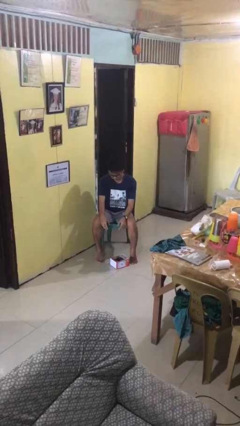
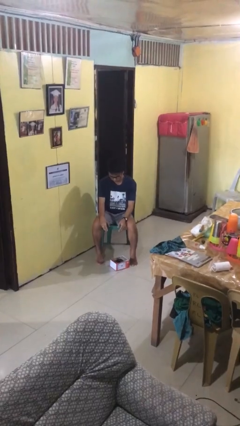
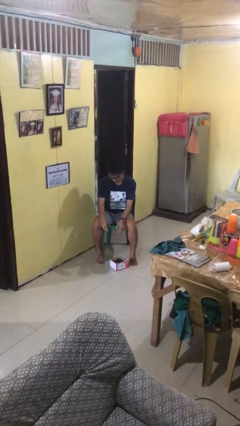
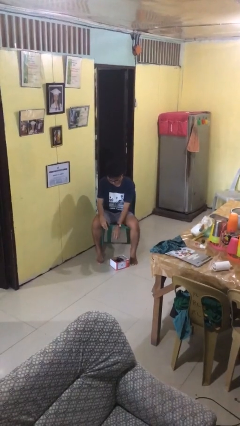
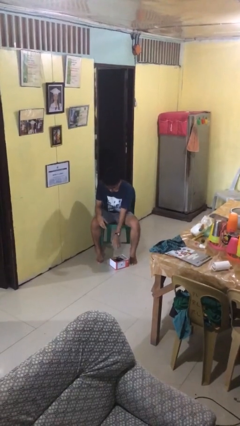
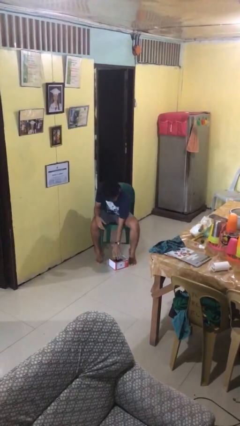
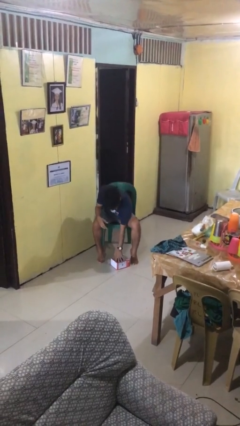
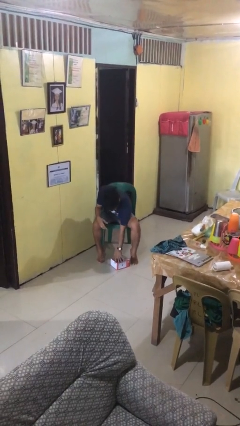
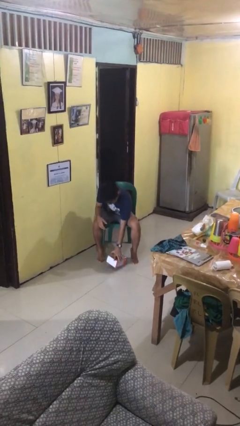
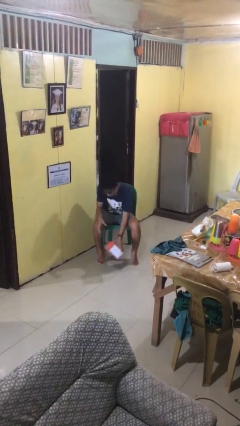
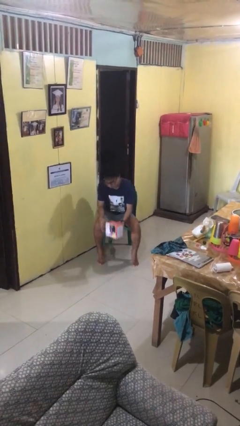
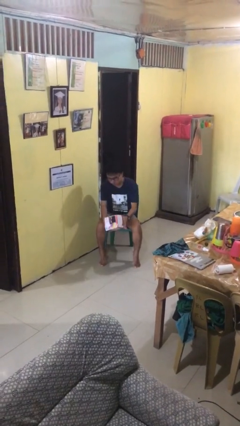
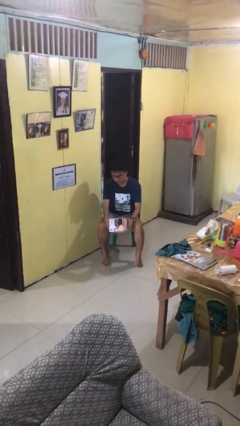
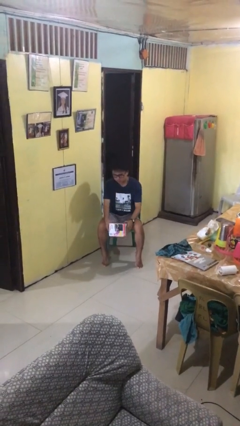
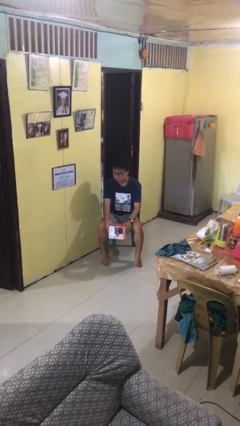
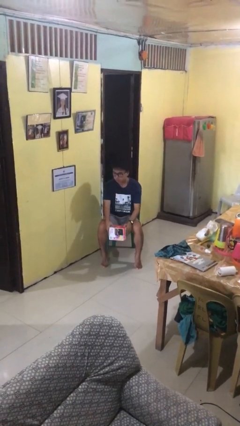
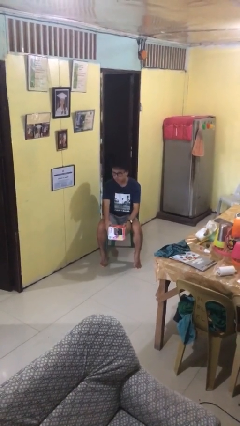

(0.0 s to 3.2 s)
person picks up object from floor

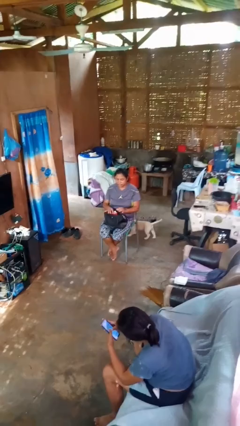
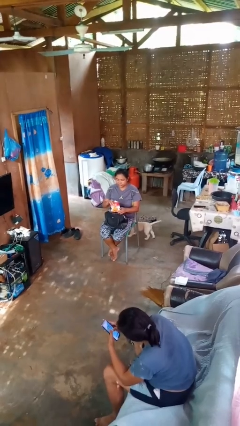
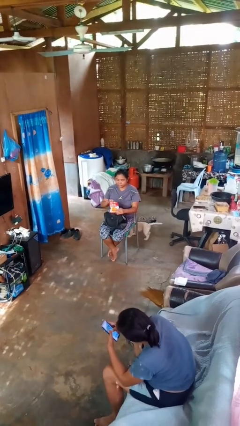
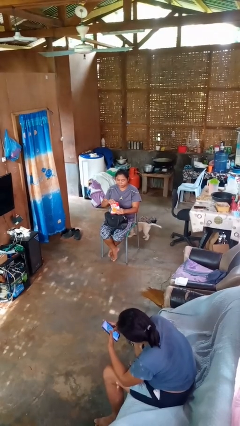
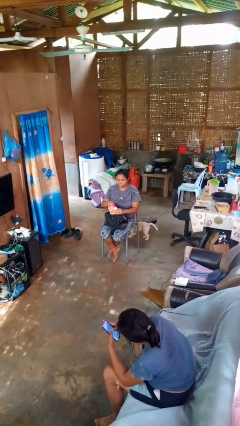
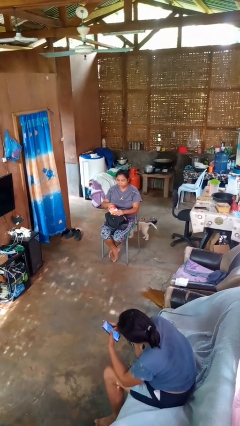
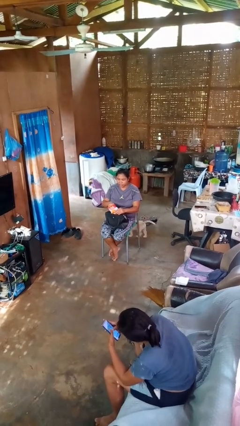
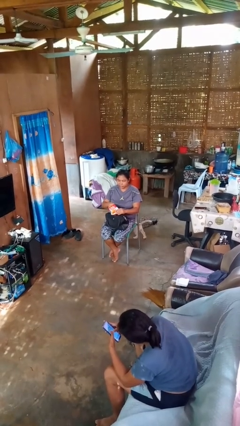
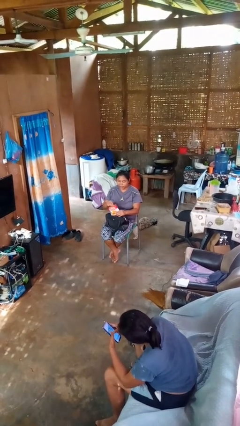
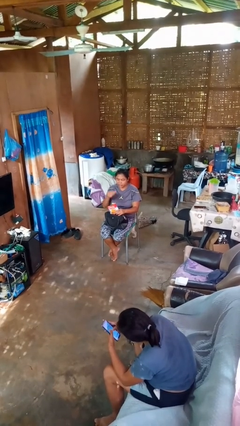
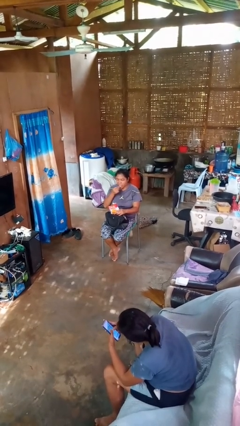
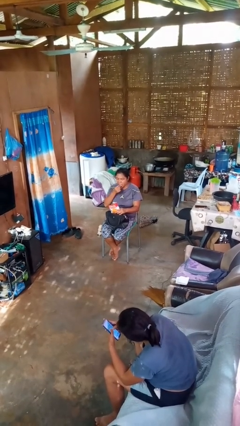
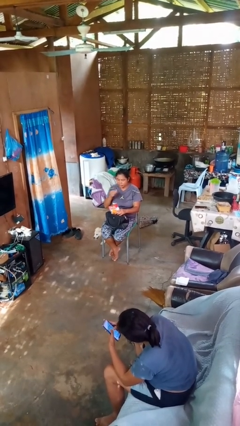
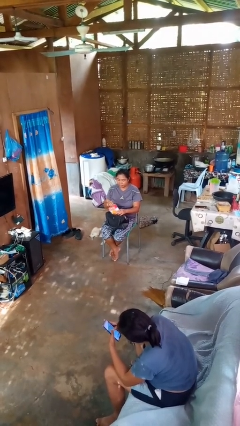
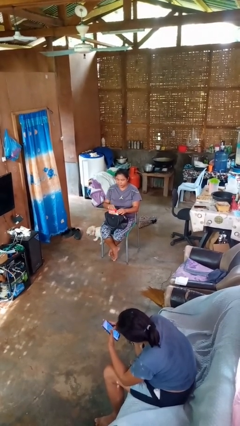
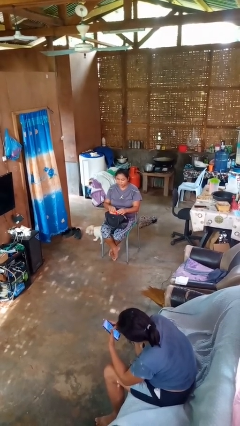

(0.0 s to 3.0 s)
person eats snack from bag

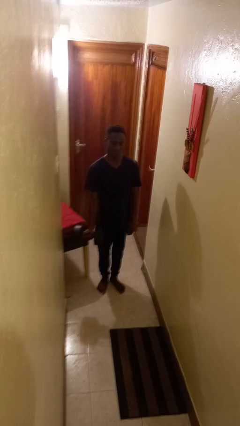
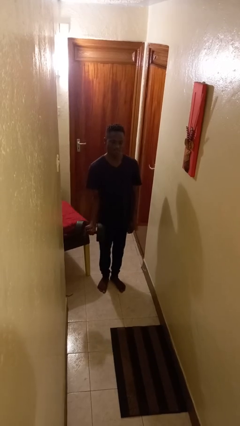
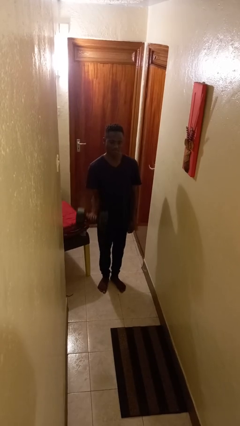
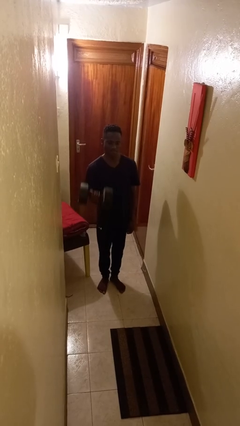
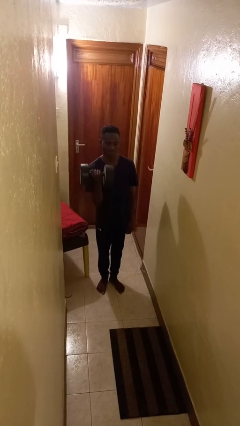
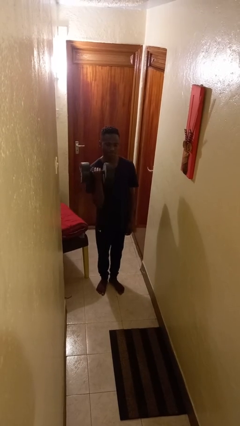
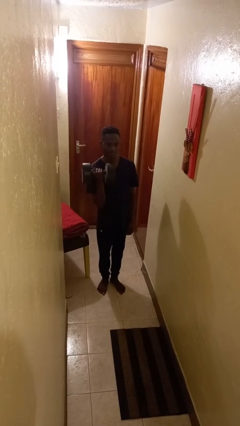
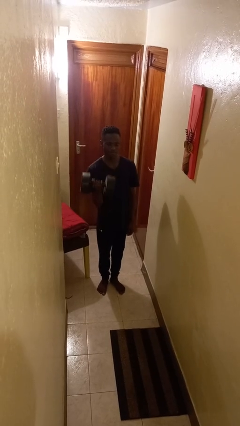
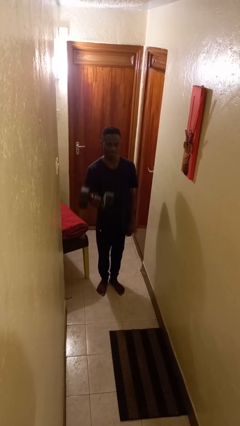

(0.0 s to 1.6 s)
person lifts dumbbells

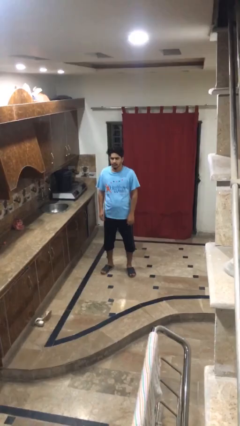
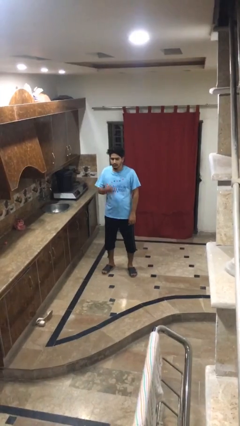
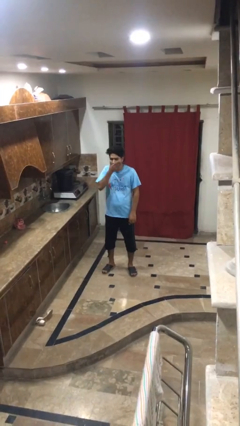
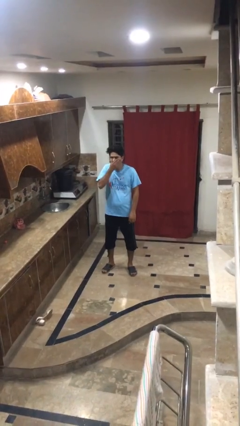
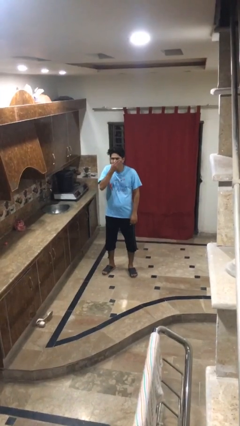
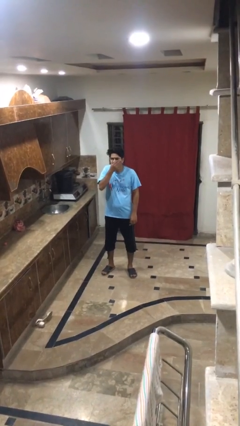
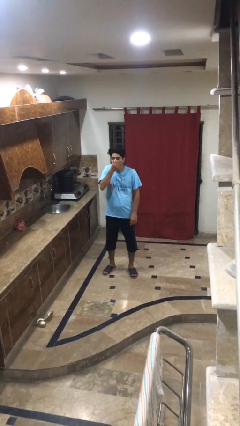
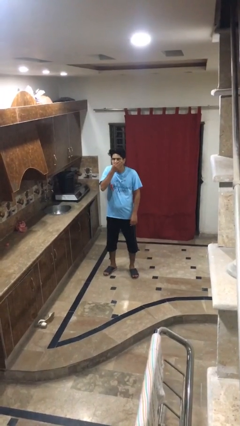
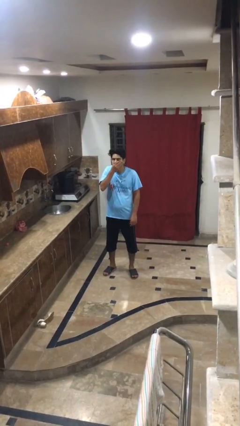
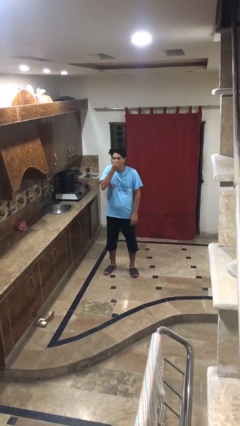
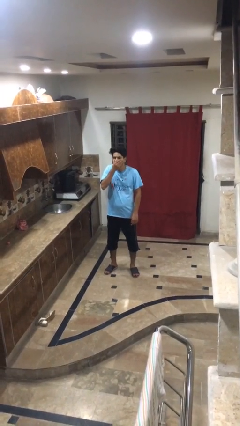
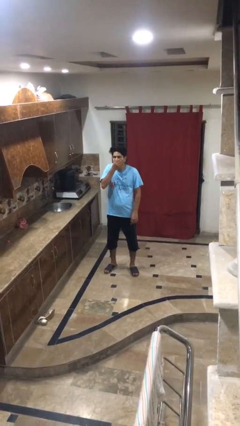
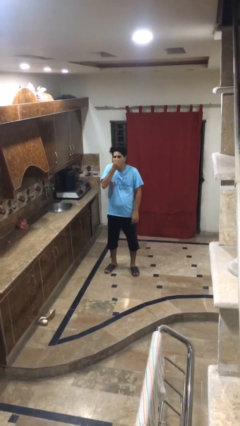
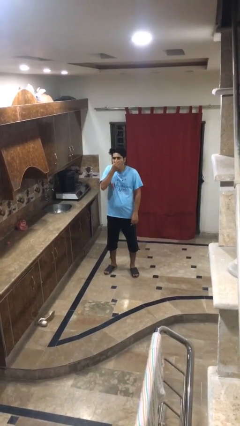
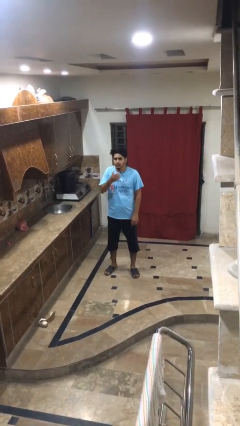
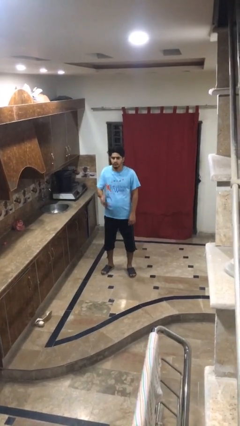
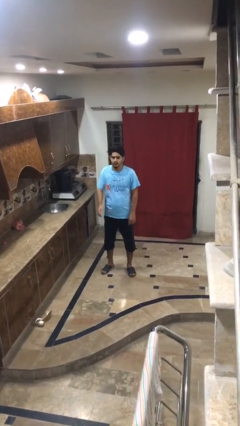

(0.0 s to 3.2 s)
person sneezes into hand

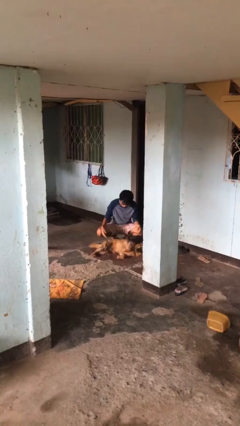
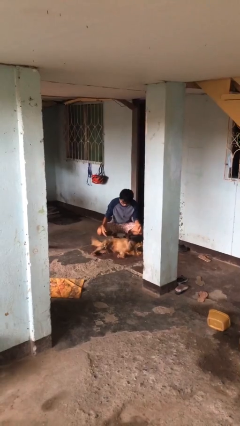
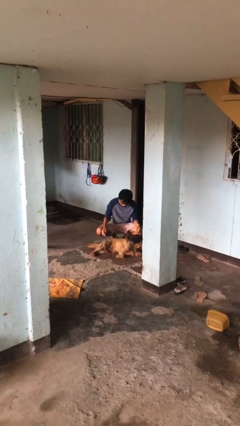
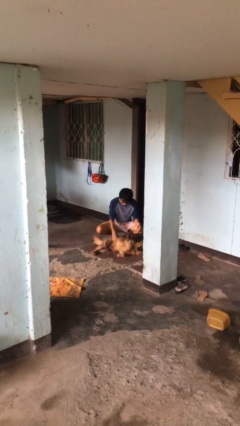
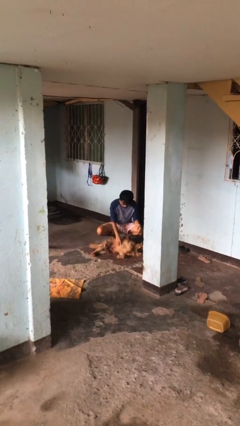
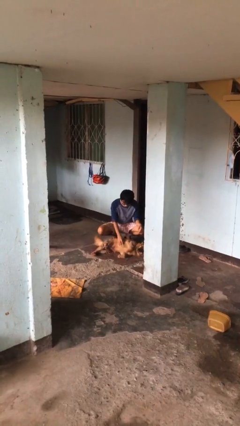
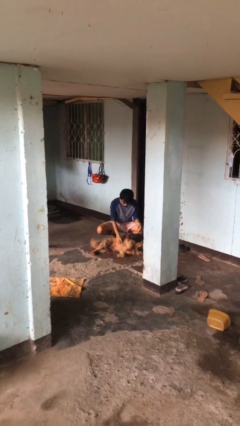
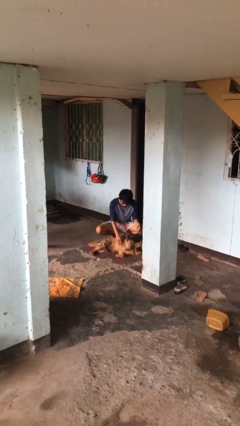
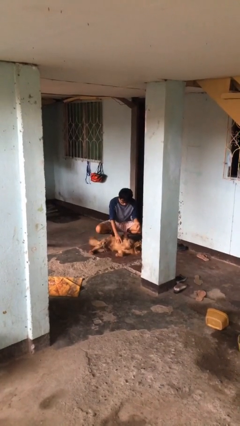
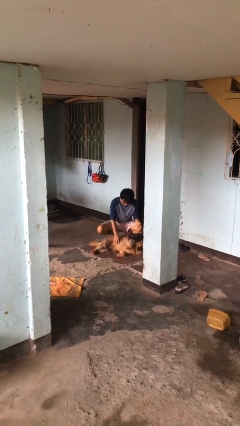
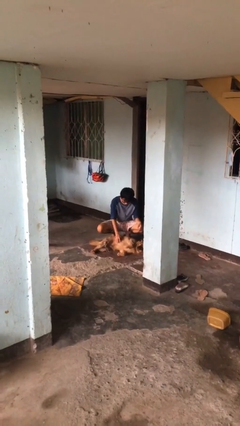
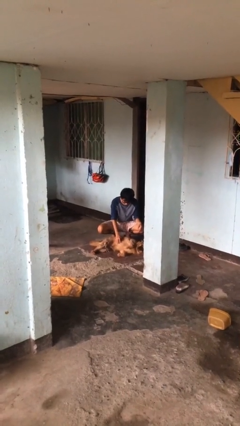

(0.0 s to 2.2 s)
person pets dog

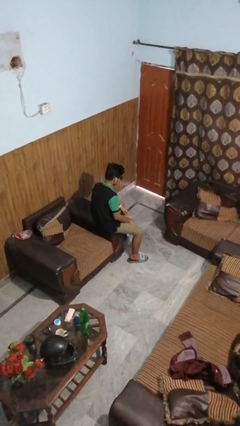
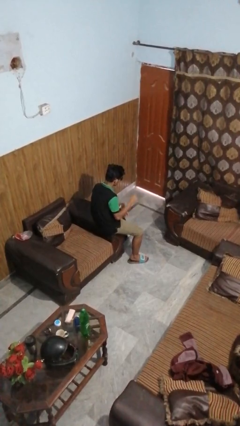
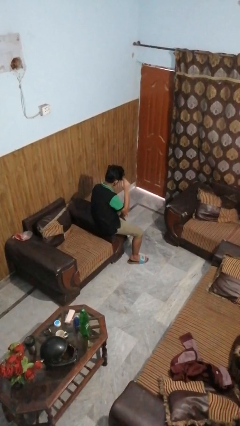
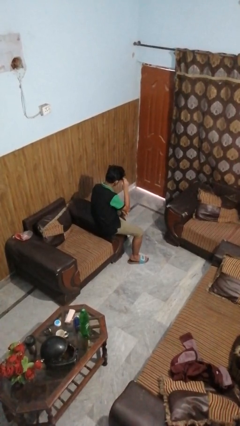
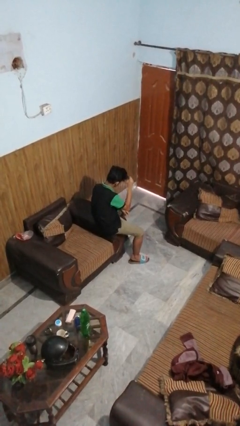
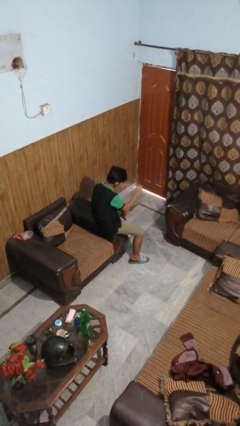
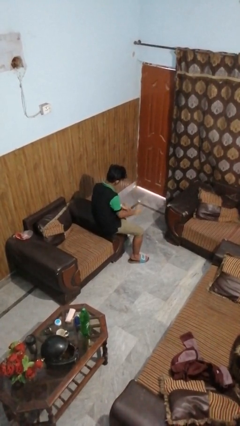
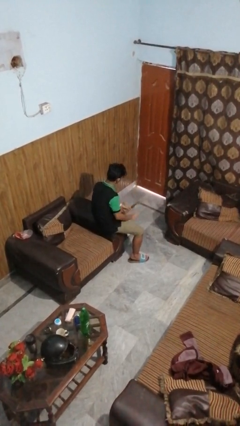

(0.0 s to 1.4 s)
person takes off sunglasses

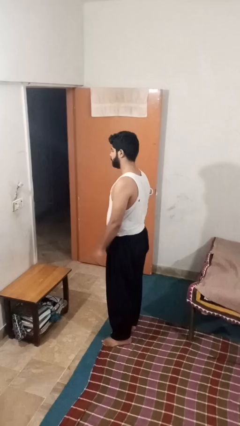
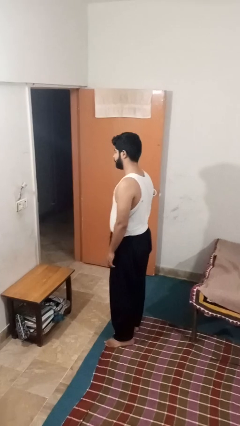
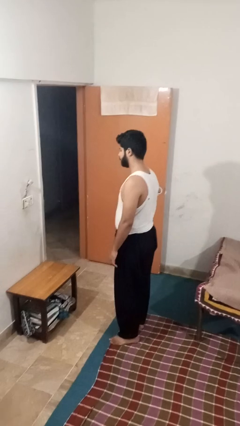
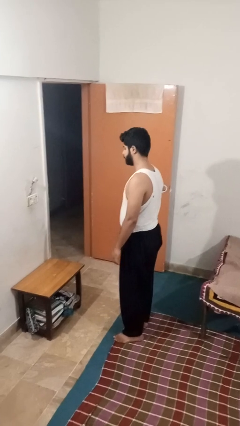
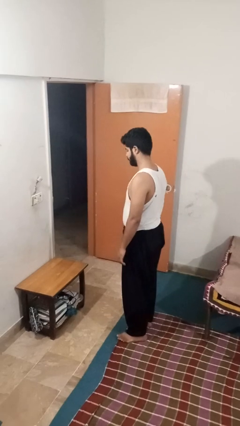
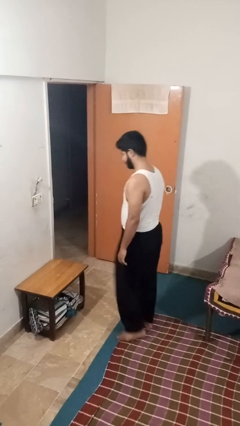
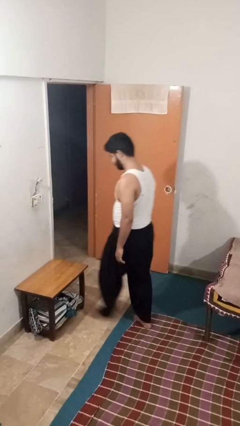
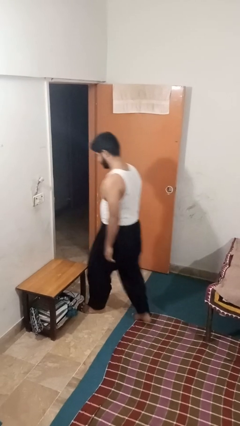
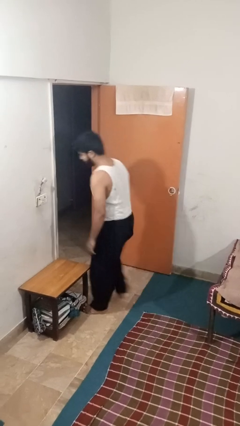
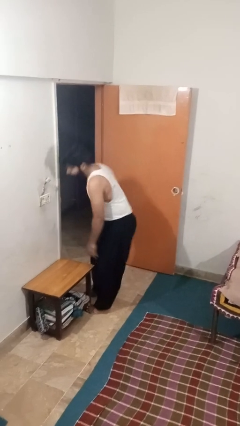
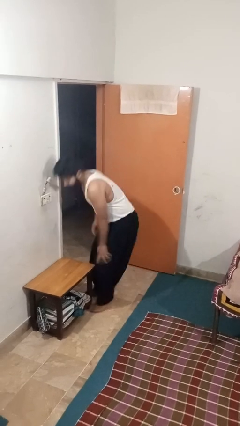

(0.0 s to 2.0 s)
person bumps into table

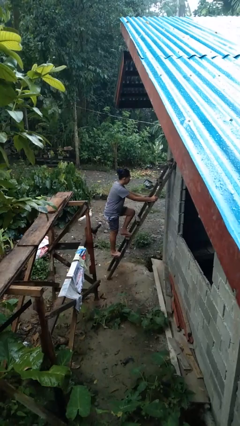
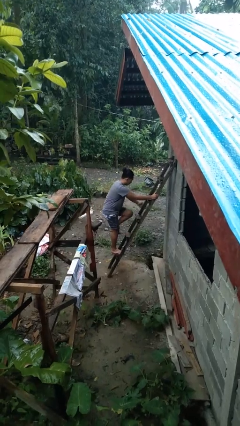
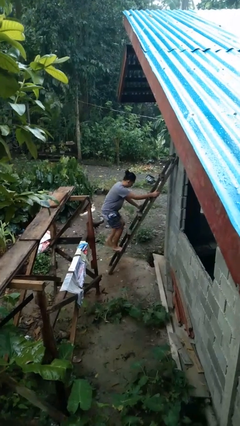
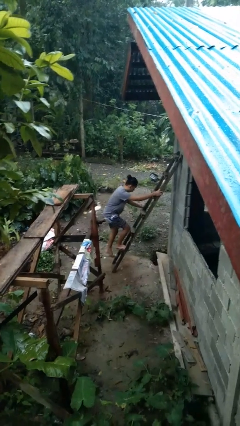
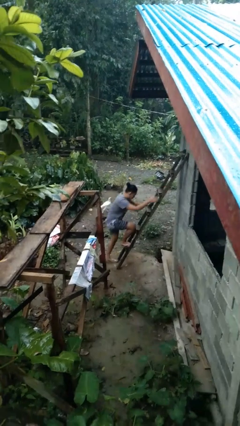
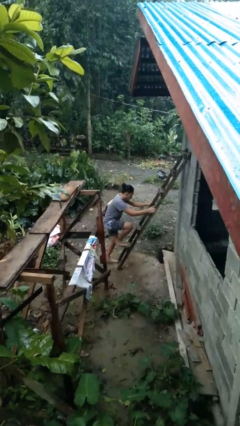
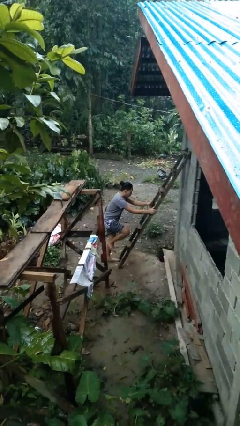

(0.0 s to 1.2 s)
person climbs down ladder
